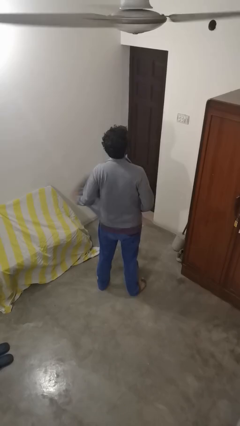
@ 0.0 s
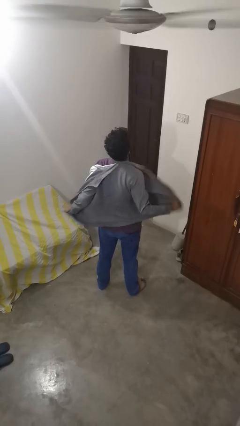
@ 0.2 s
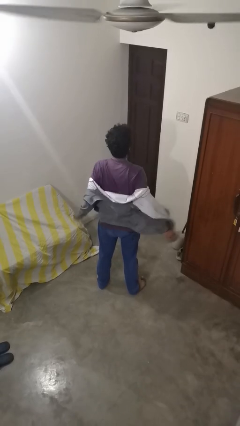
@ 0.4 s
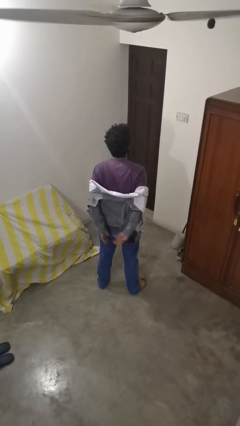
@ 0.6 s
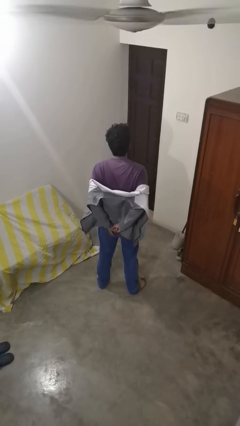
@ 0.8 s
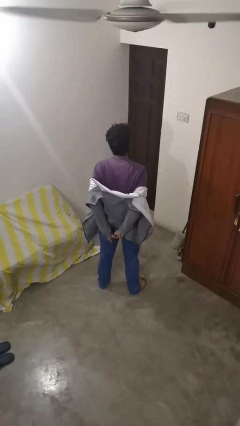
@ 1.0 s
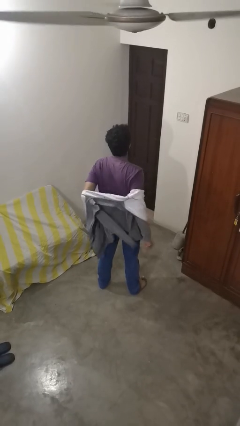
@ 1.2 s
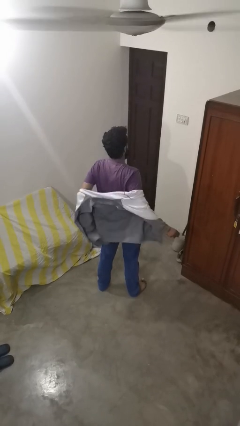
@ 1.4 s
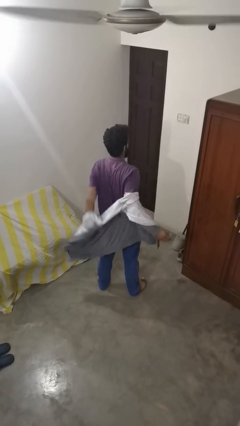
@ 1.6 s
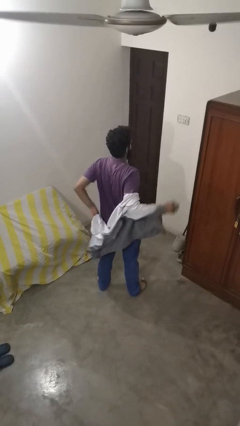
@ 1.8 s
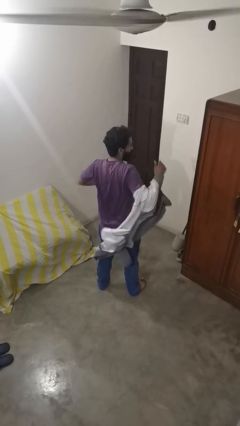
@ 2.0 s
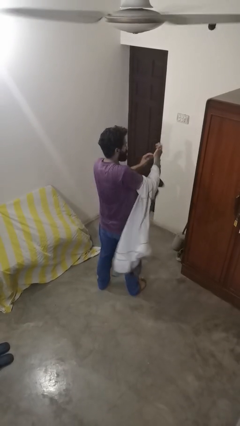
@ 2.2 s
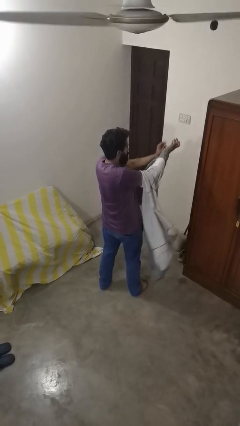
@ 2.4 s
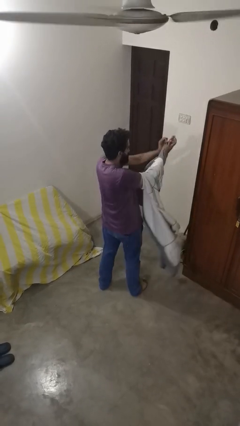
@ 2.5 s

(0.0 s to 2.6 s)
person takes off jacket

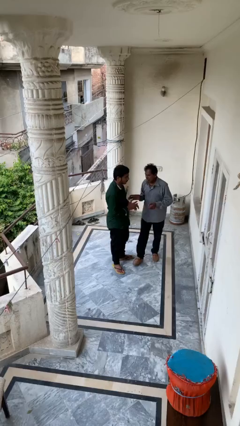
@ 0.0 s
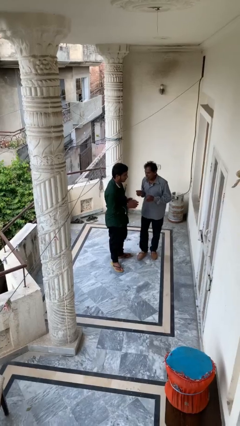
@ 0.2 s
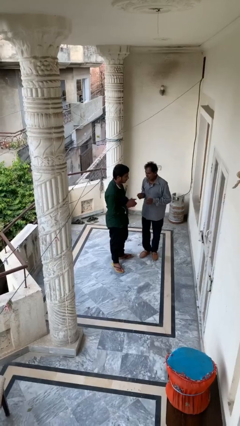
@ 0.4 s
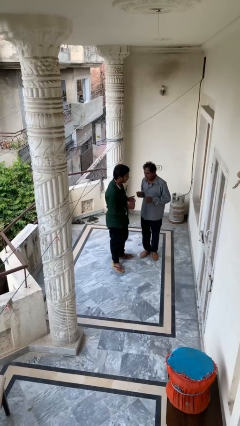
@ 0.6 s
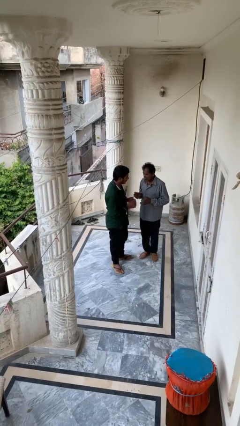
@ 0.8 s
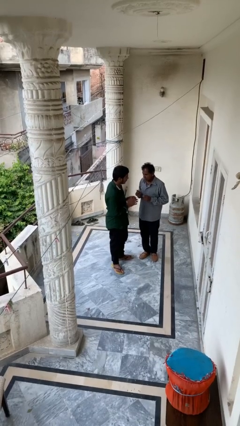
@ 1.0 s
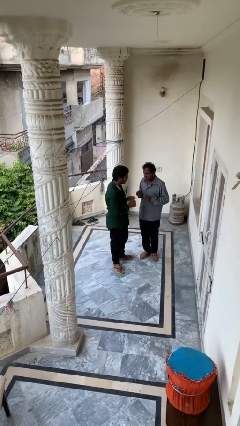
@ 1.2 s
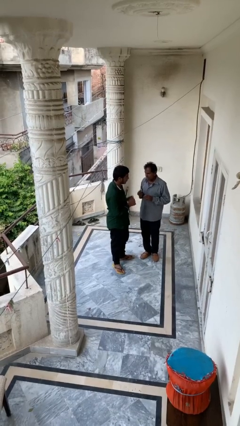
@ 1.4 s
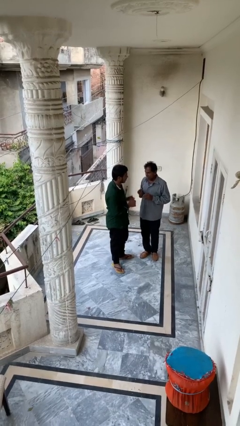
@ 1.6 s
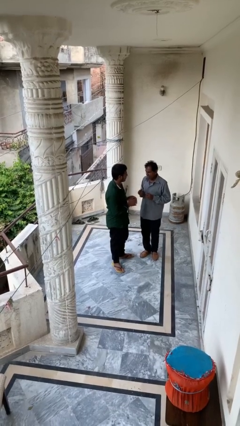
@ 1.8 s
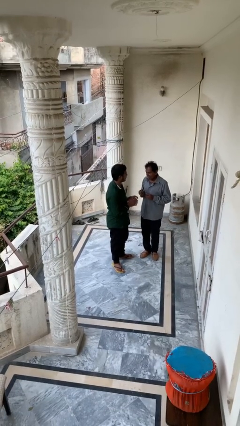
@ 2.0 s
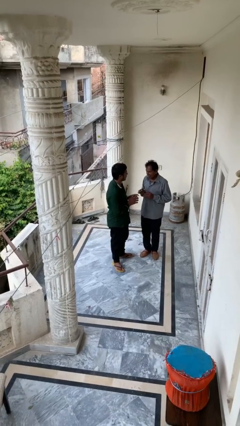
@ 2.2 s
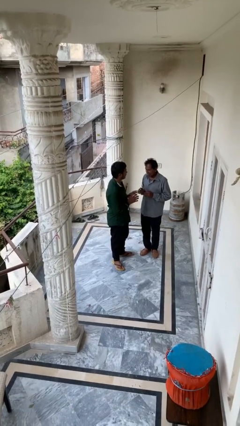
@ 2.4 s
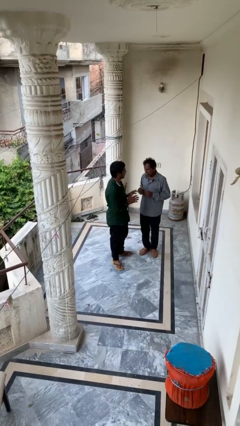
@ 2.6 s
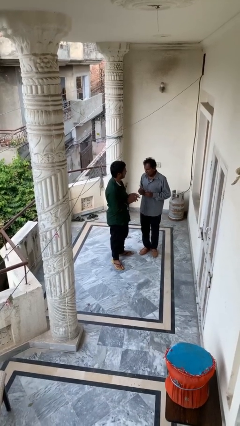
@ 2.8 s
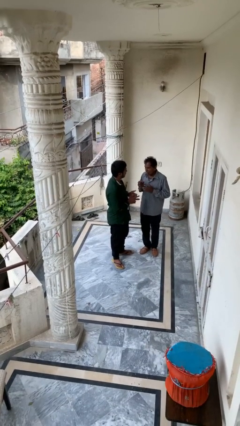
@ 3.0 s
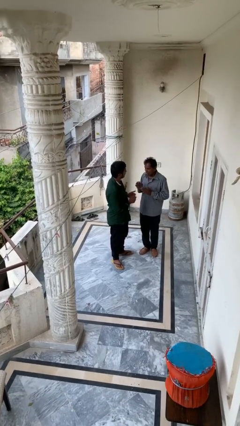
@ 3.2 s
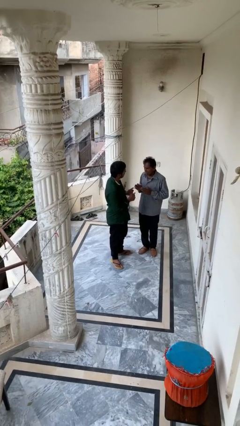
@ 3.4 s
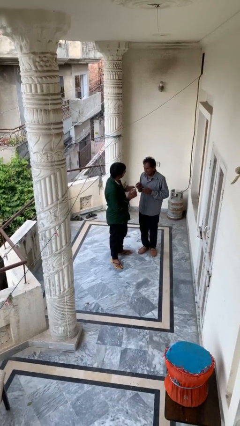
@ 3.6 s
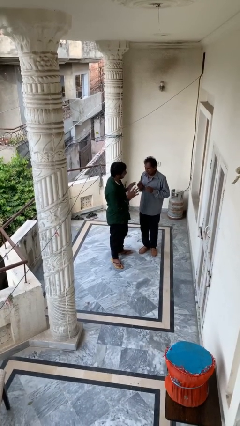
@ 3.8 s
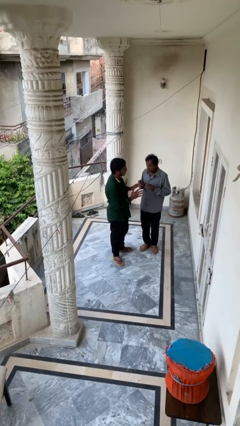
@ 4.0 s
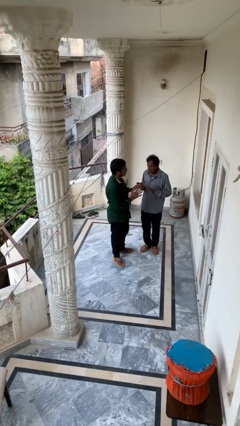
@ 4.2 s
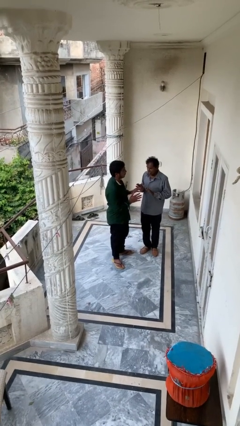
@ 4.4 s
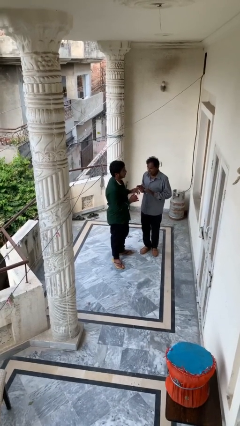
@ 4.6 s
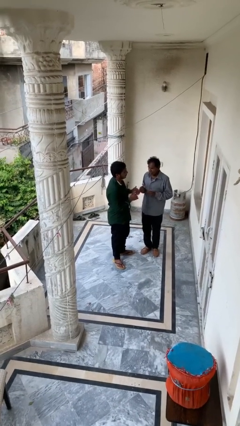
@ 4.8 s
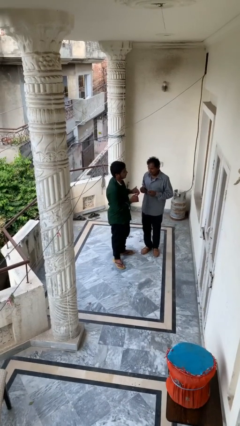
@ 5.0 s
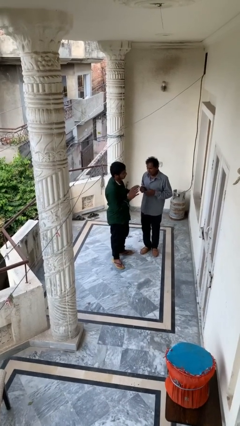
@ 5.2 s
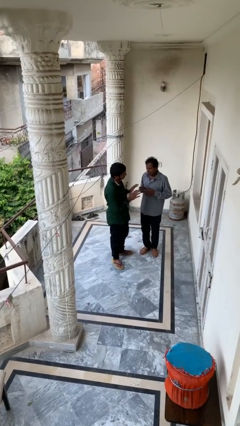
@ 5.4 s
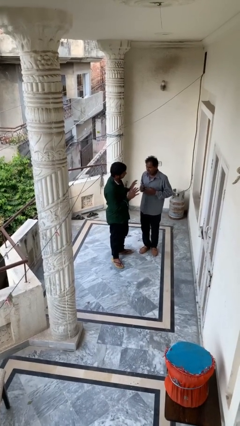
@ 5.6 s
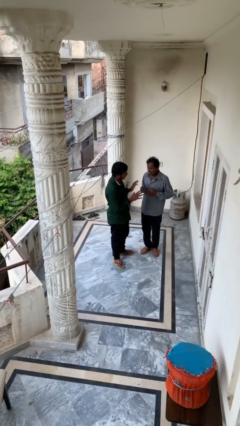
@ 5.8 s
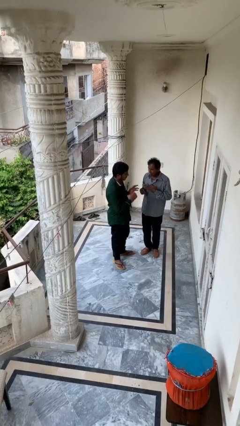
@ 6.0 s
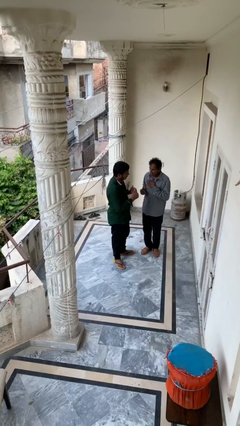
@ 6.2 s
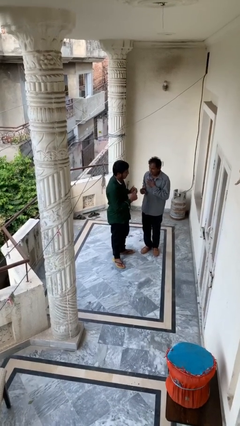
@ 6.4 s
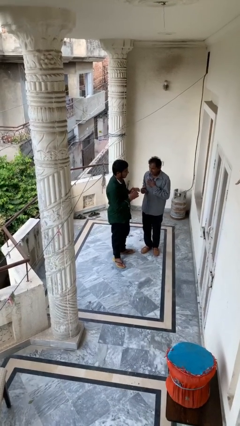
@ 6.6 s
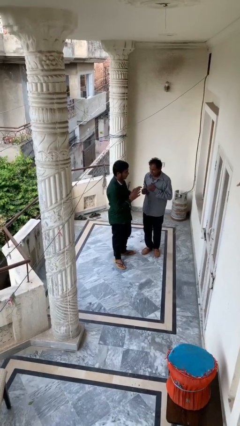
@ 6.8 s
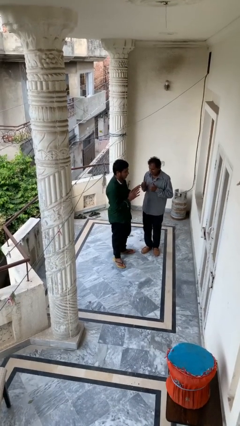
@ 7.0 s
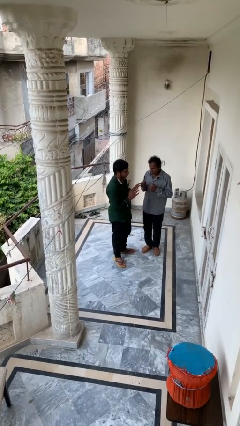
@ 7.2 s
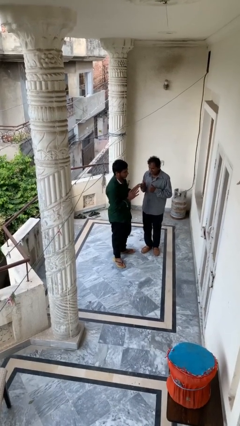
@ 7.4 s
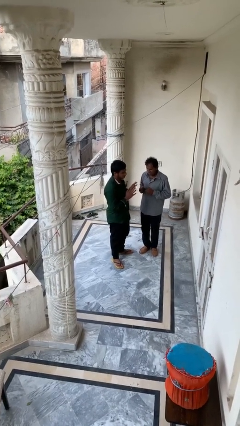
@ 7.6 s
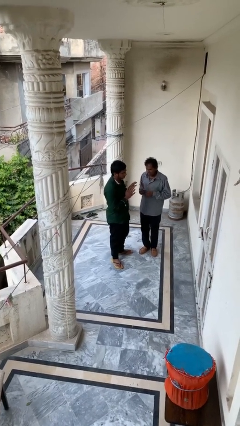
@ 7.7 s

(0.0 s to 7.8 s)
person talks to person

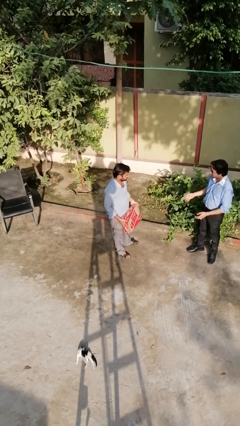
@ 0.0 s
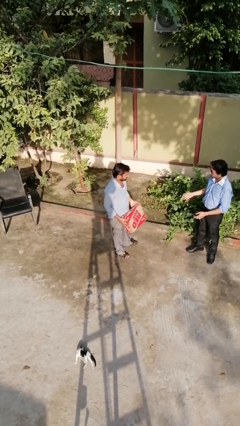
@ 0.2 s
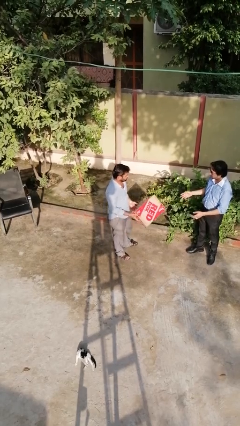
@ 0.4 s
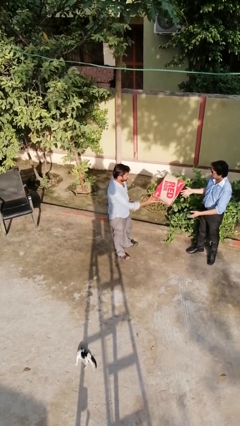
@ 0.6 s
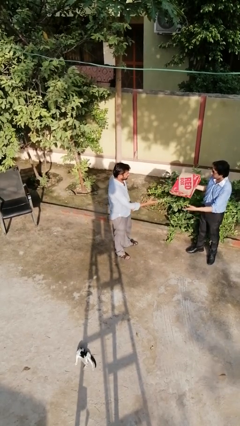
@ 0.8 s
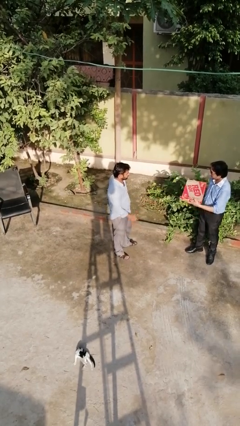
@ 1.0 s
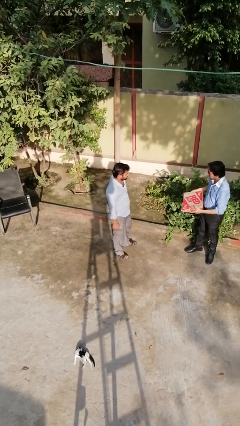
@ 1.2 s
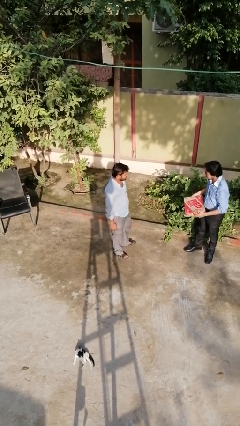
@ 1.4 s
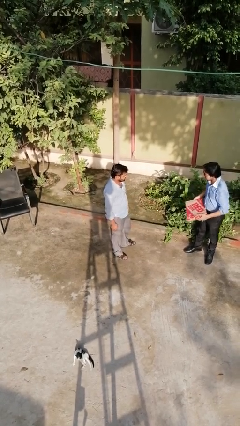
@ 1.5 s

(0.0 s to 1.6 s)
person throws object to person

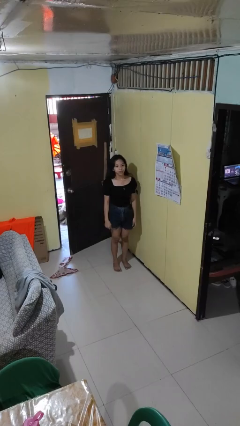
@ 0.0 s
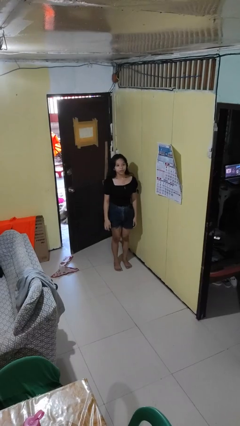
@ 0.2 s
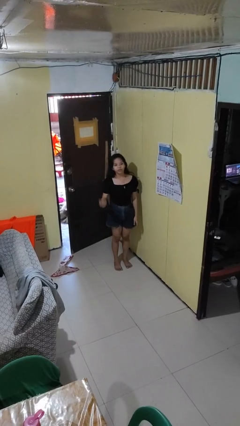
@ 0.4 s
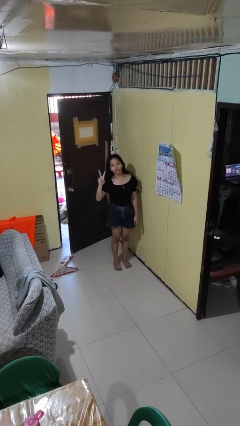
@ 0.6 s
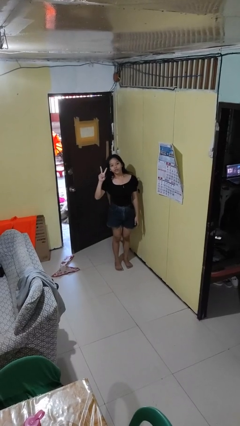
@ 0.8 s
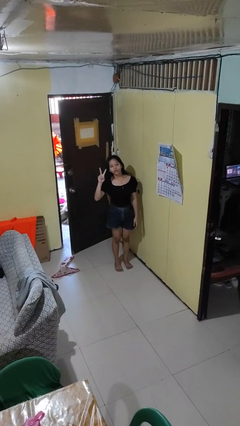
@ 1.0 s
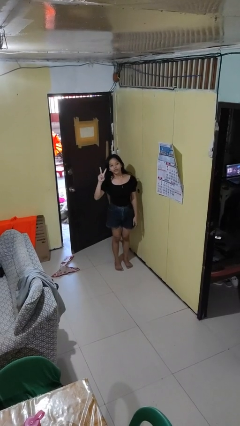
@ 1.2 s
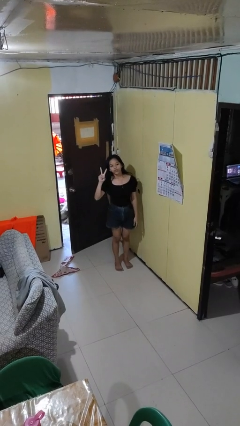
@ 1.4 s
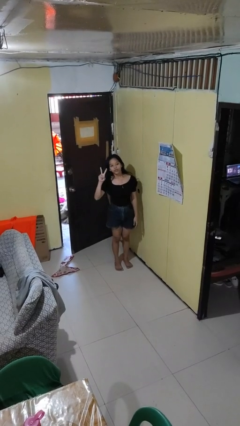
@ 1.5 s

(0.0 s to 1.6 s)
person gestures peace

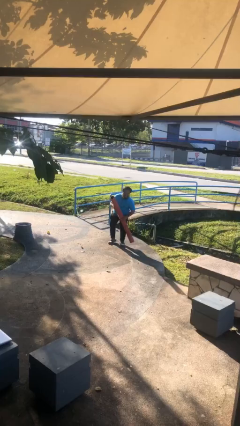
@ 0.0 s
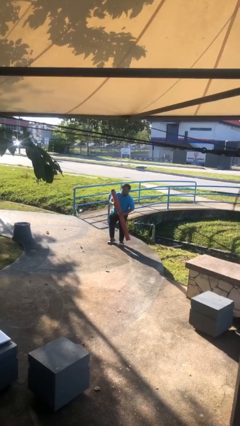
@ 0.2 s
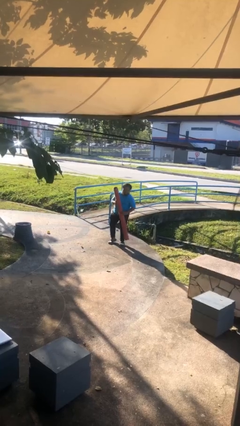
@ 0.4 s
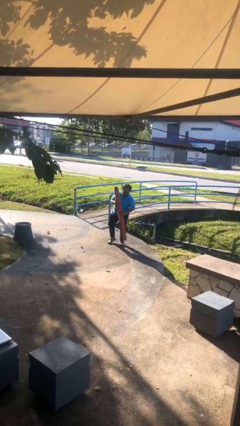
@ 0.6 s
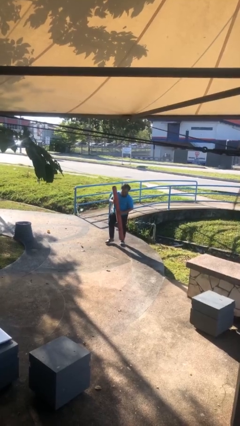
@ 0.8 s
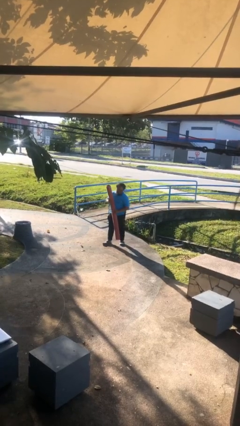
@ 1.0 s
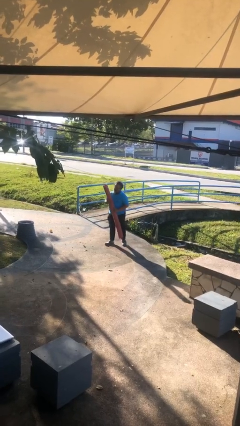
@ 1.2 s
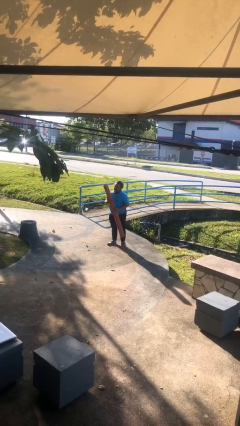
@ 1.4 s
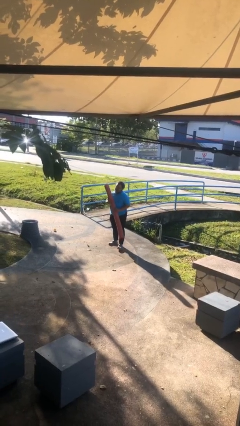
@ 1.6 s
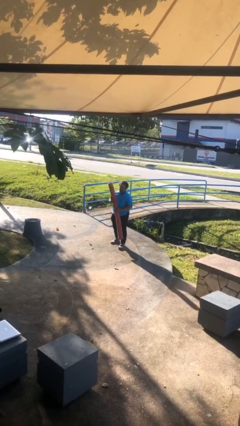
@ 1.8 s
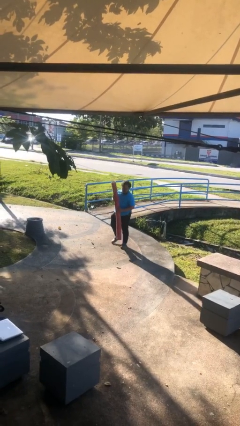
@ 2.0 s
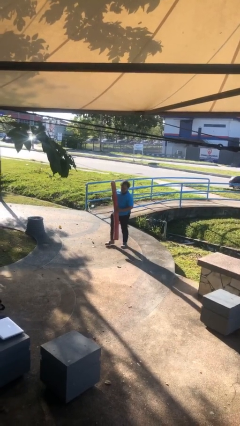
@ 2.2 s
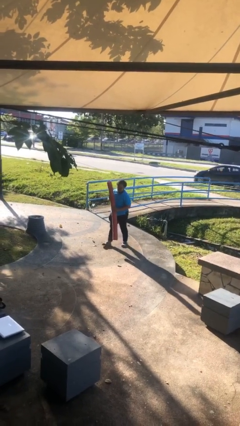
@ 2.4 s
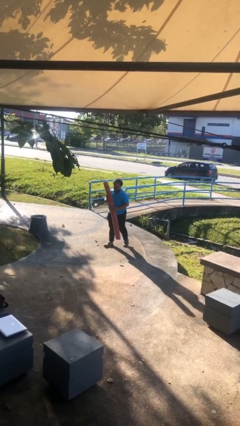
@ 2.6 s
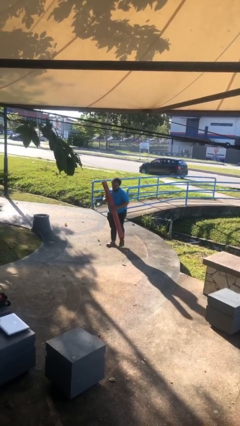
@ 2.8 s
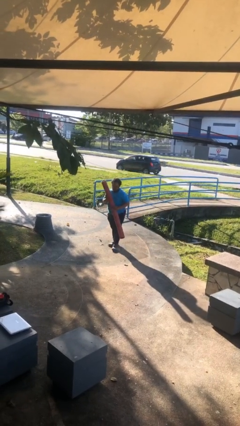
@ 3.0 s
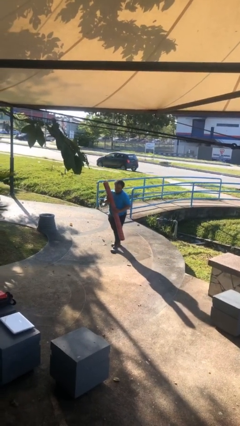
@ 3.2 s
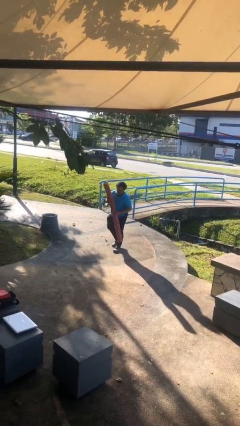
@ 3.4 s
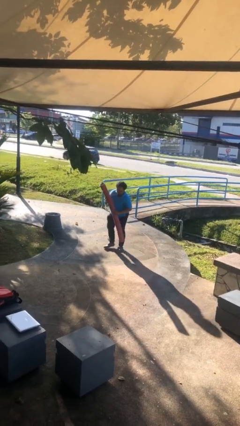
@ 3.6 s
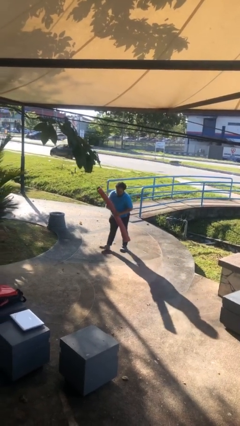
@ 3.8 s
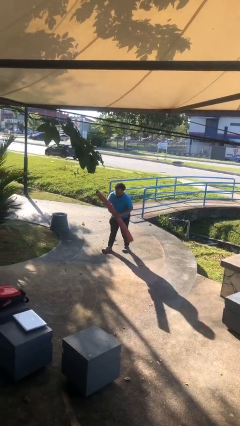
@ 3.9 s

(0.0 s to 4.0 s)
person carries heavy object
